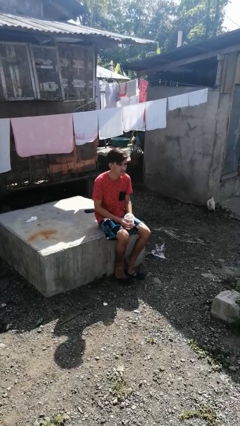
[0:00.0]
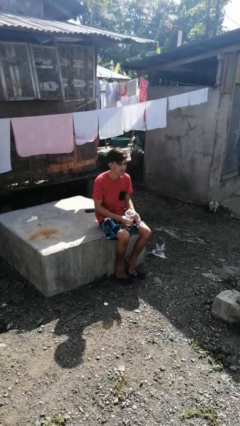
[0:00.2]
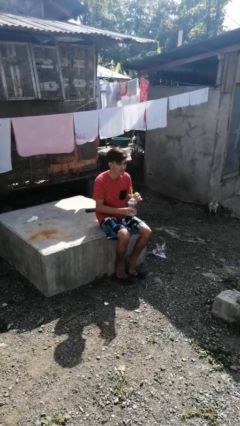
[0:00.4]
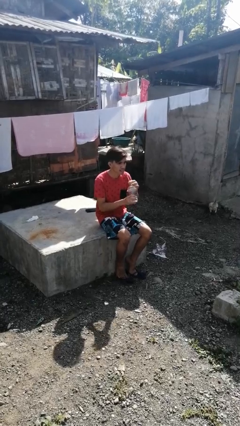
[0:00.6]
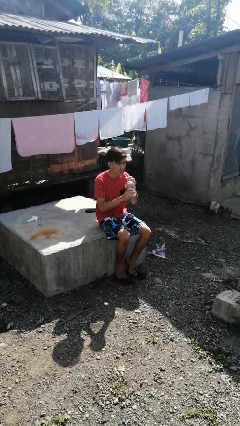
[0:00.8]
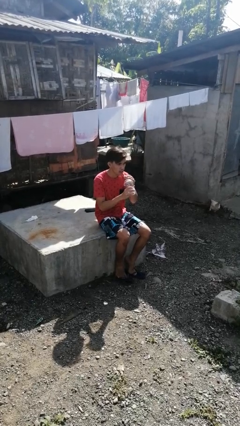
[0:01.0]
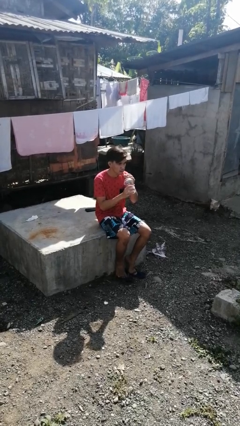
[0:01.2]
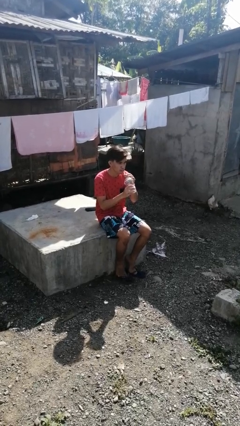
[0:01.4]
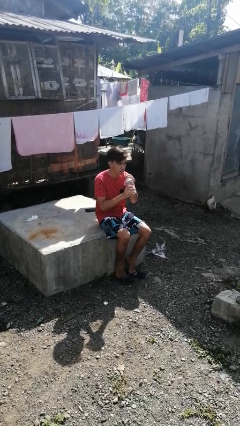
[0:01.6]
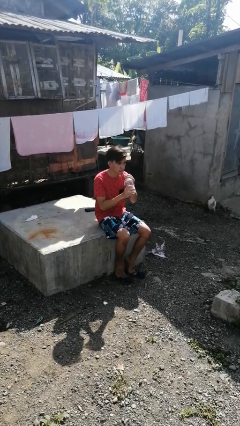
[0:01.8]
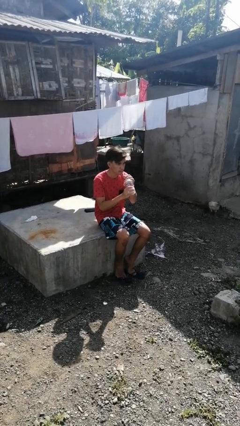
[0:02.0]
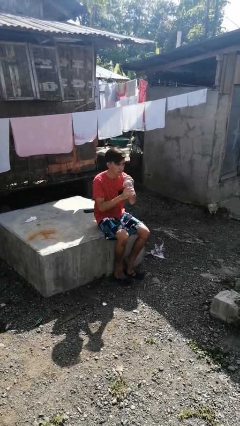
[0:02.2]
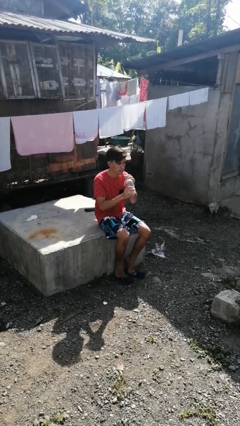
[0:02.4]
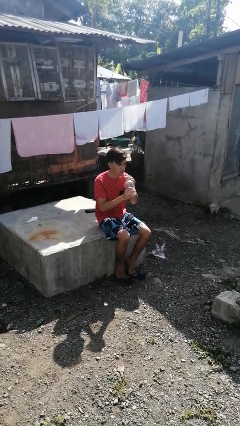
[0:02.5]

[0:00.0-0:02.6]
person drinks from straw

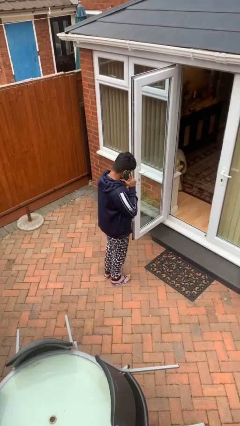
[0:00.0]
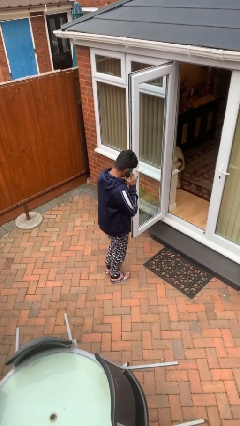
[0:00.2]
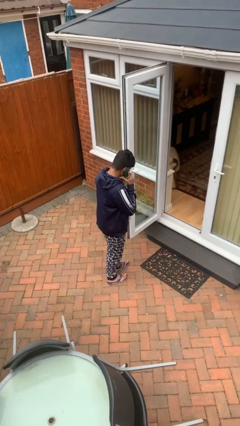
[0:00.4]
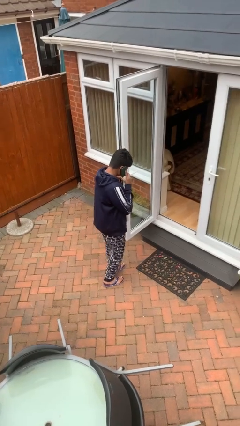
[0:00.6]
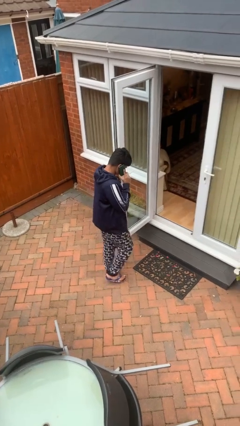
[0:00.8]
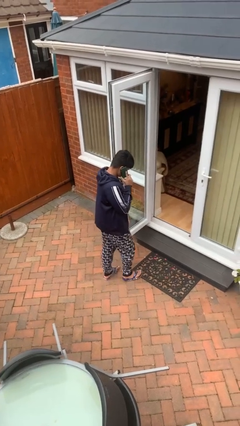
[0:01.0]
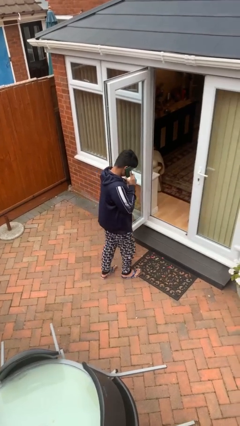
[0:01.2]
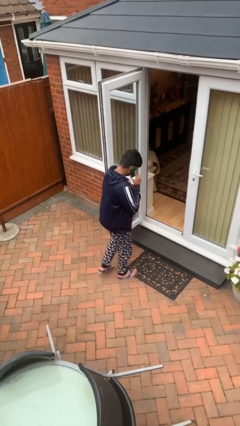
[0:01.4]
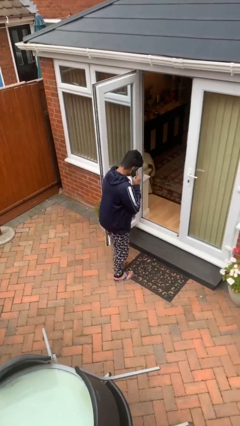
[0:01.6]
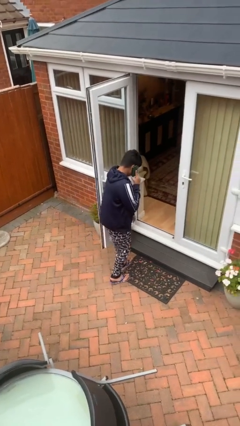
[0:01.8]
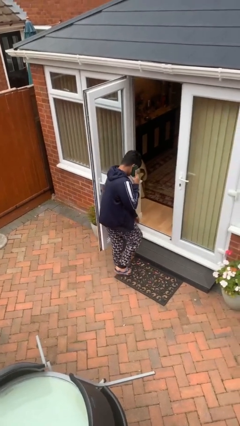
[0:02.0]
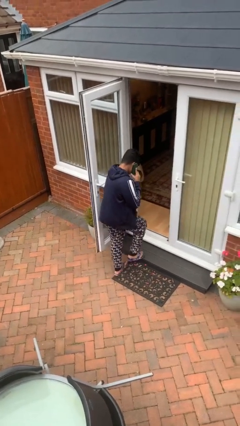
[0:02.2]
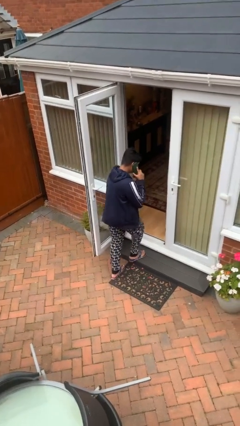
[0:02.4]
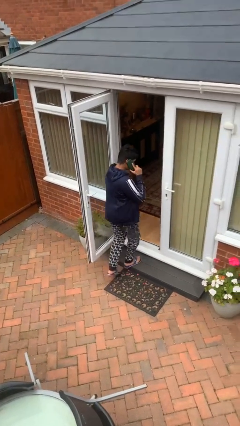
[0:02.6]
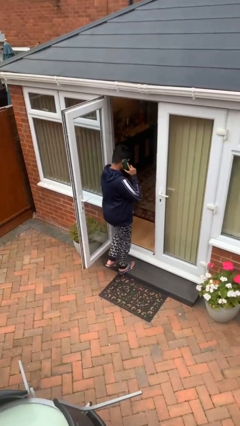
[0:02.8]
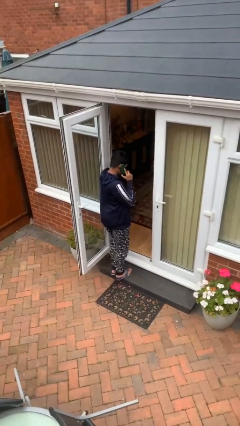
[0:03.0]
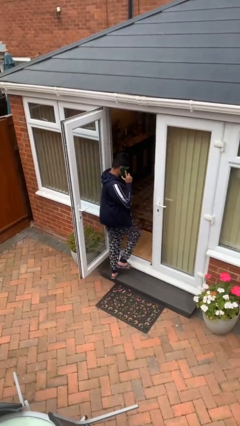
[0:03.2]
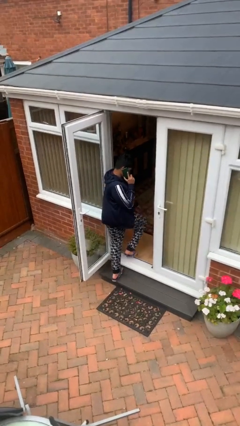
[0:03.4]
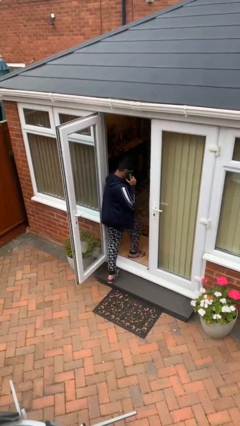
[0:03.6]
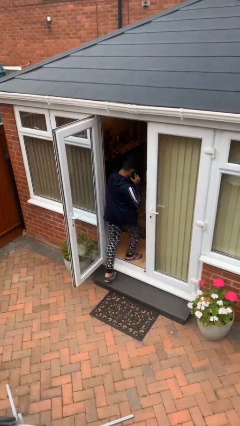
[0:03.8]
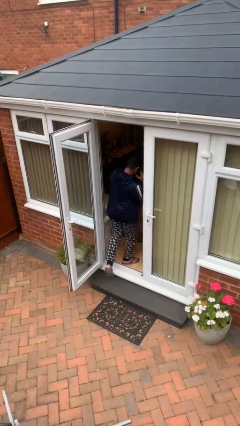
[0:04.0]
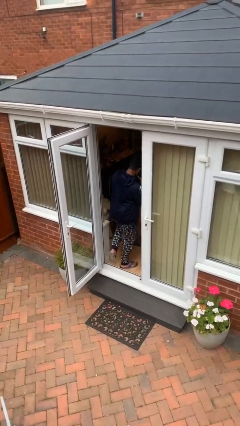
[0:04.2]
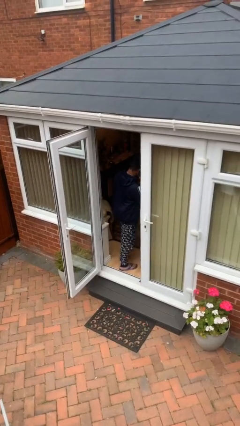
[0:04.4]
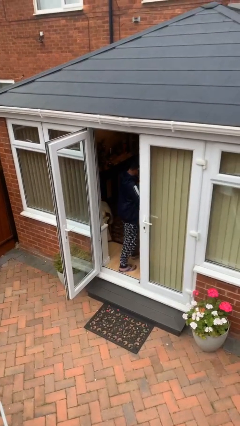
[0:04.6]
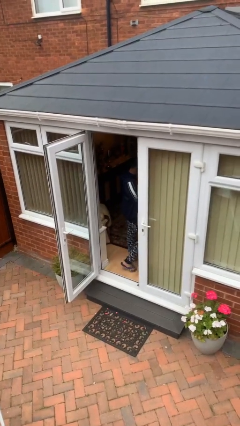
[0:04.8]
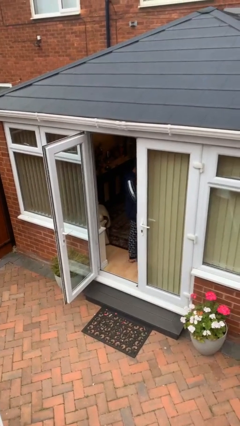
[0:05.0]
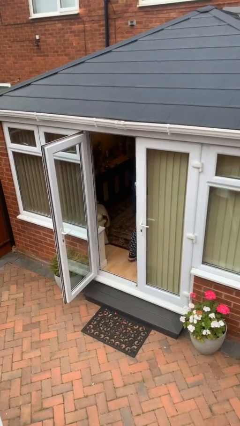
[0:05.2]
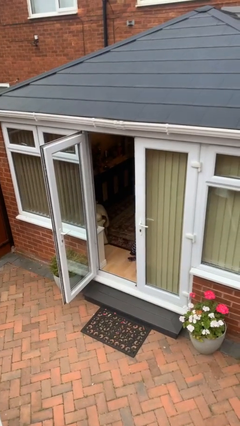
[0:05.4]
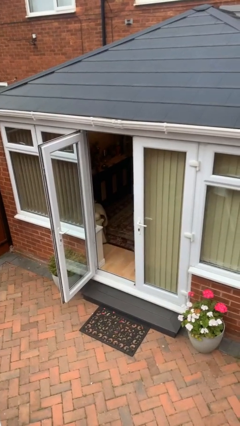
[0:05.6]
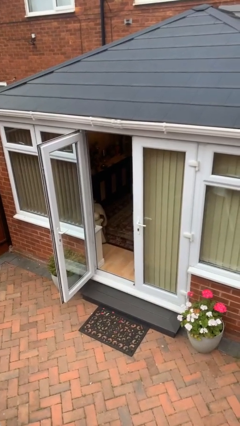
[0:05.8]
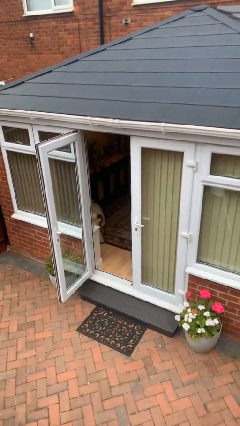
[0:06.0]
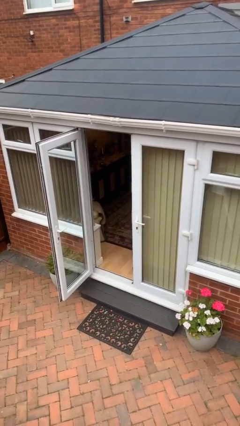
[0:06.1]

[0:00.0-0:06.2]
person exits scene through structure

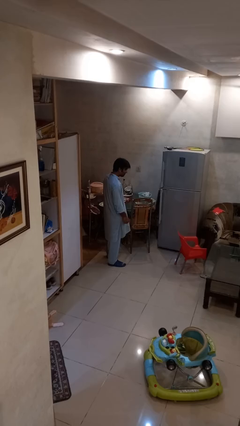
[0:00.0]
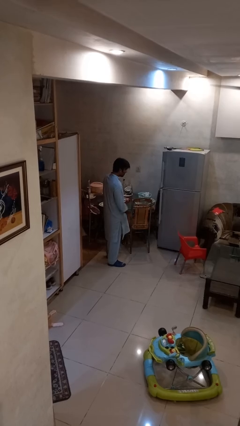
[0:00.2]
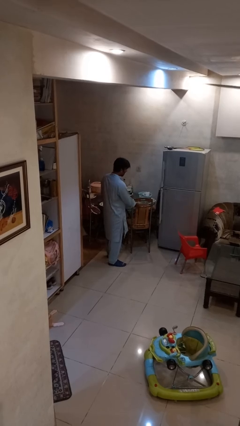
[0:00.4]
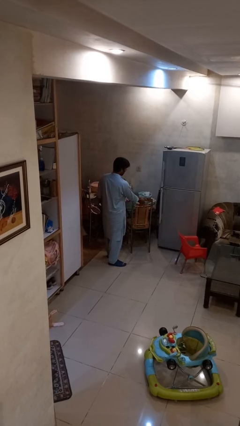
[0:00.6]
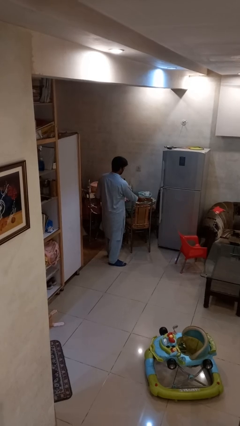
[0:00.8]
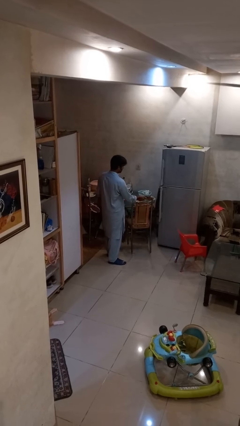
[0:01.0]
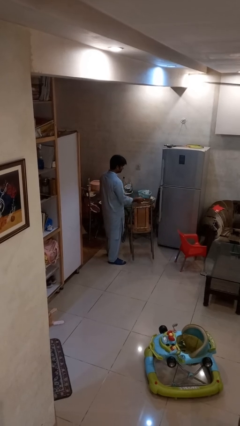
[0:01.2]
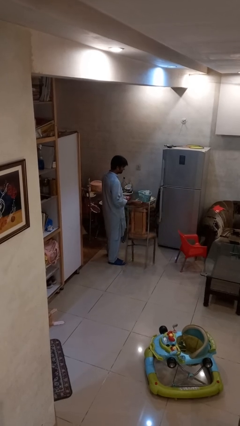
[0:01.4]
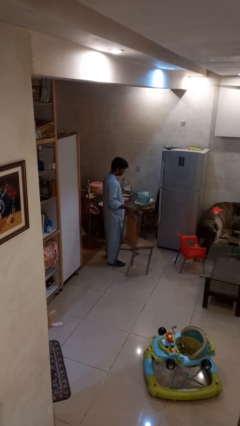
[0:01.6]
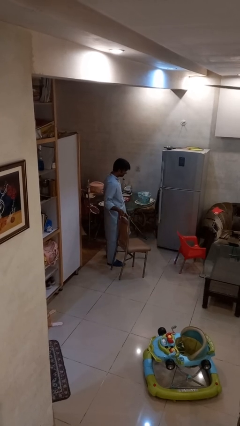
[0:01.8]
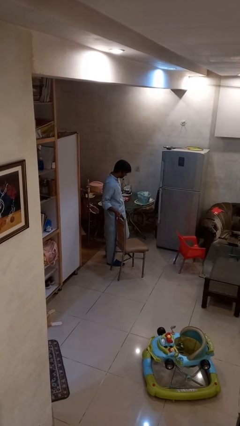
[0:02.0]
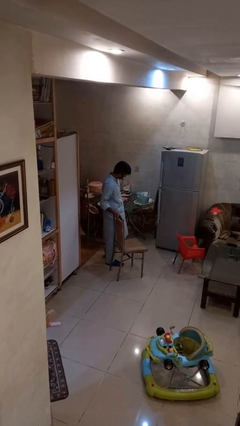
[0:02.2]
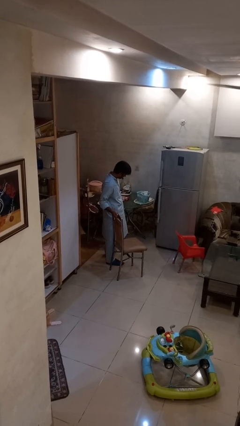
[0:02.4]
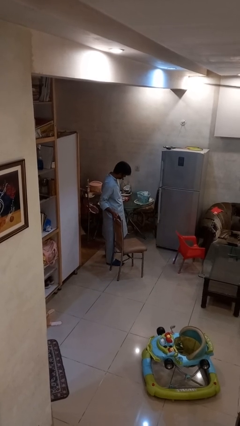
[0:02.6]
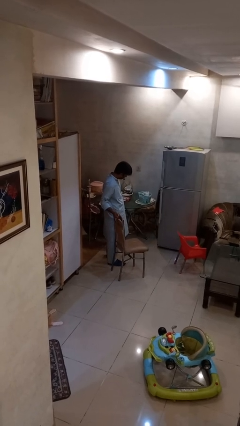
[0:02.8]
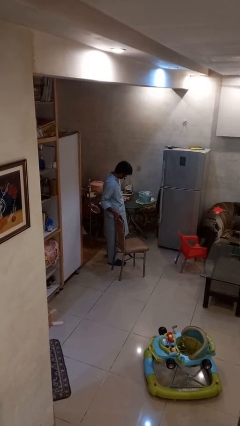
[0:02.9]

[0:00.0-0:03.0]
person pulls out chair

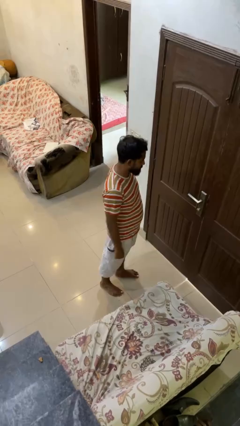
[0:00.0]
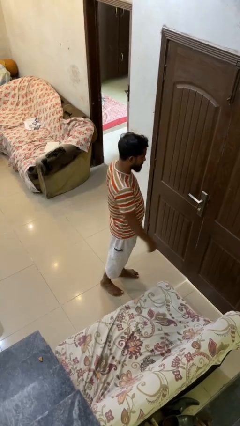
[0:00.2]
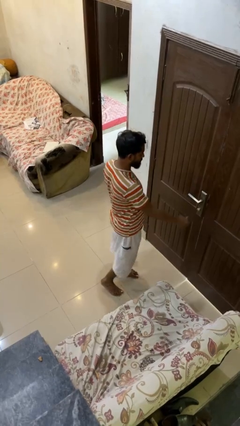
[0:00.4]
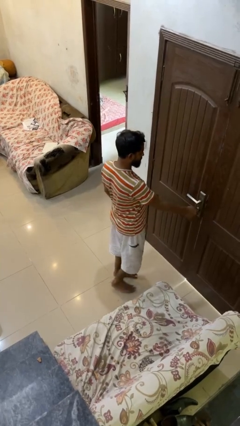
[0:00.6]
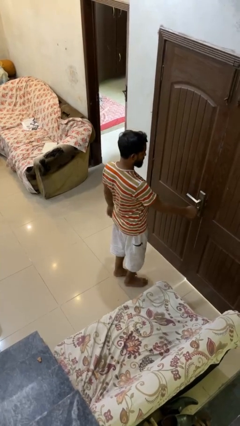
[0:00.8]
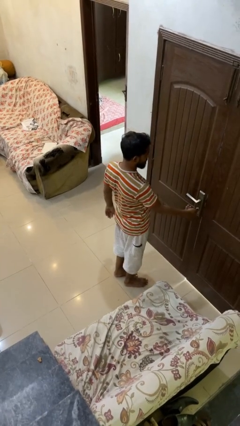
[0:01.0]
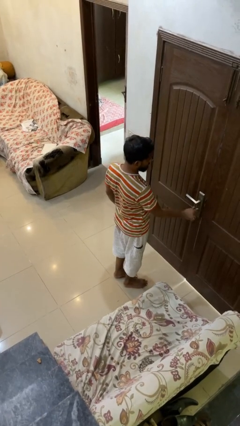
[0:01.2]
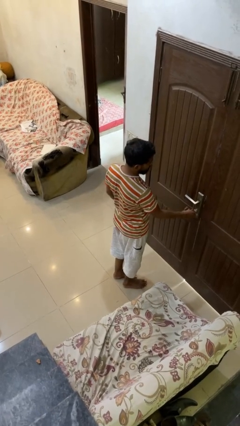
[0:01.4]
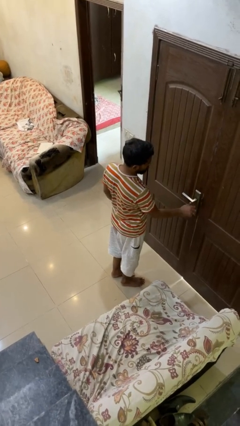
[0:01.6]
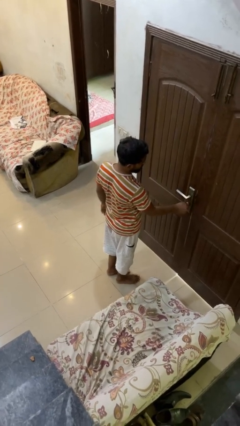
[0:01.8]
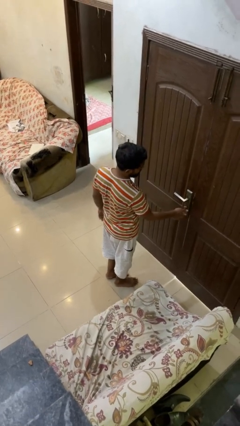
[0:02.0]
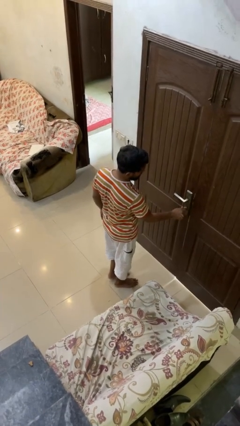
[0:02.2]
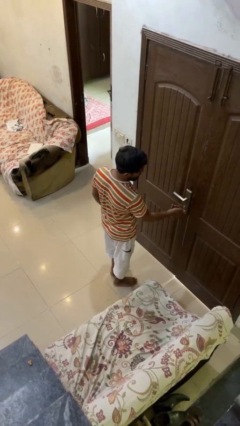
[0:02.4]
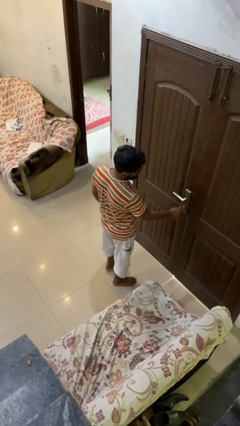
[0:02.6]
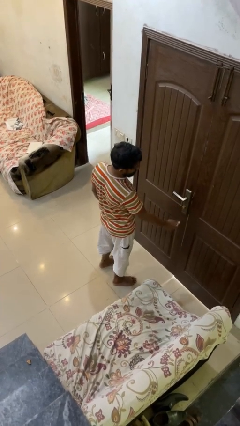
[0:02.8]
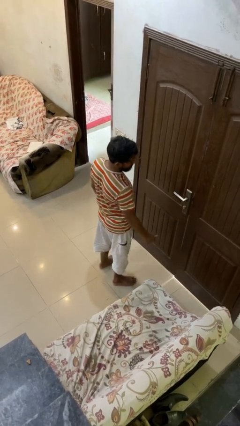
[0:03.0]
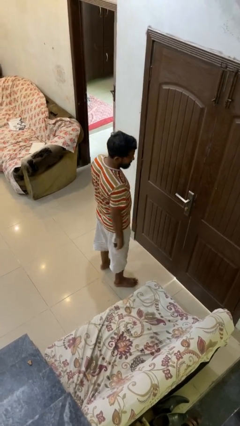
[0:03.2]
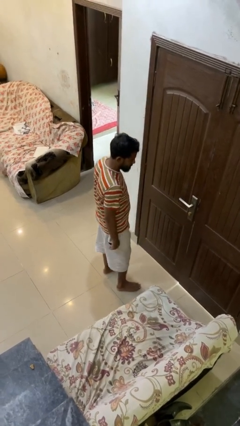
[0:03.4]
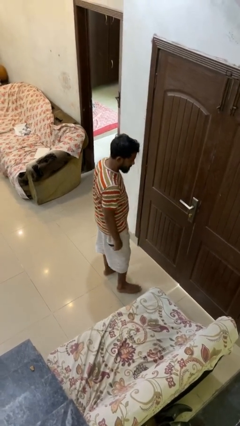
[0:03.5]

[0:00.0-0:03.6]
person locks door with keys

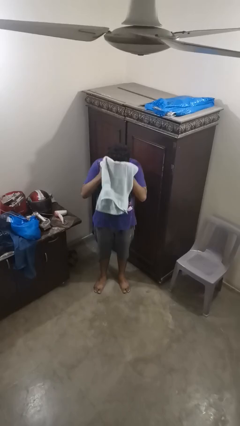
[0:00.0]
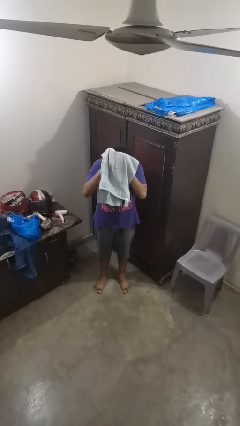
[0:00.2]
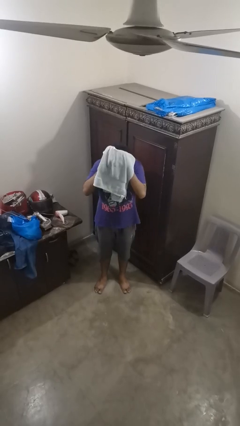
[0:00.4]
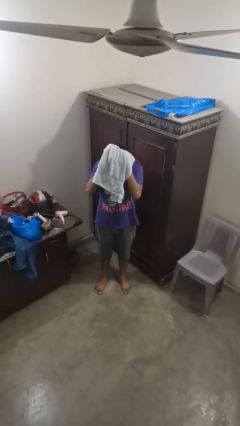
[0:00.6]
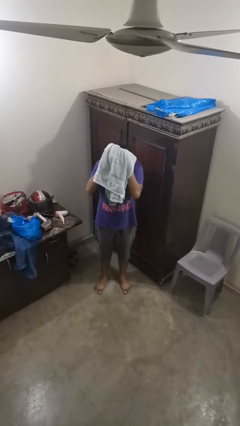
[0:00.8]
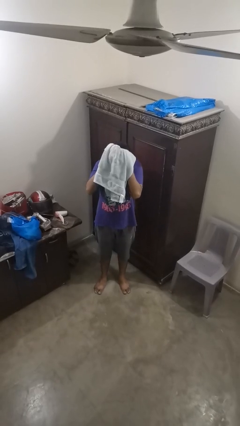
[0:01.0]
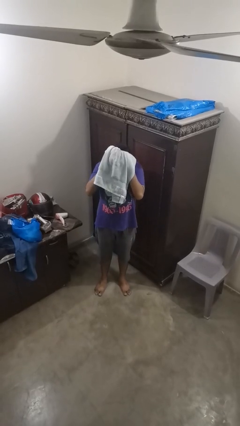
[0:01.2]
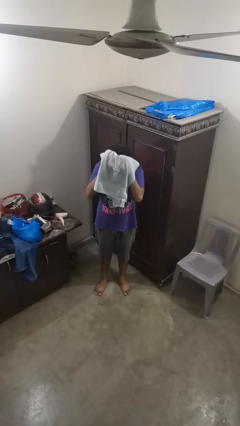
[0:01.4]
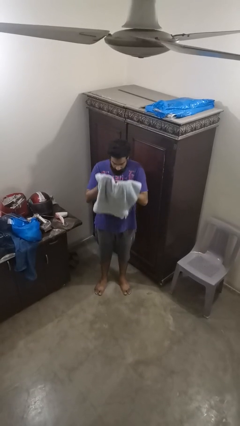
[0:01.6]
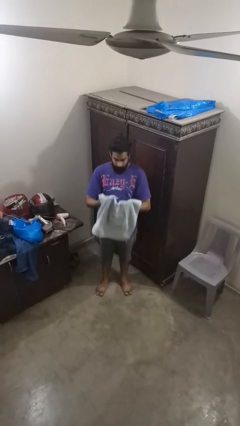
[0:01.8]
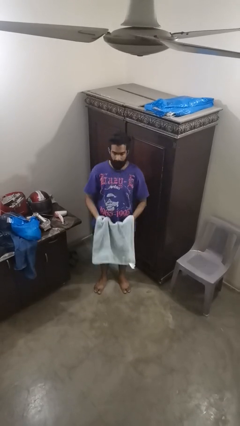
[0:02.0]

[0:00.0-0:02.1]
person dries hair with towel

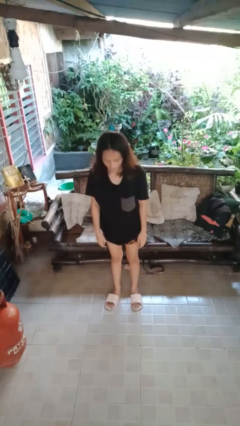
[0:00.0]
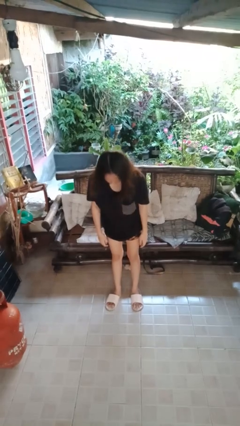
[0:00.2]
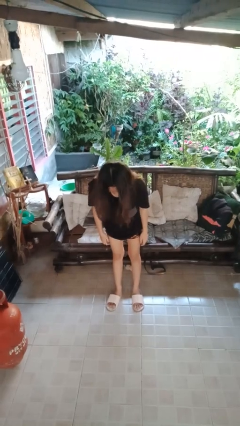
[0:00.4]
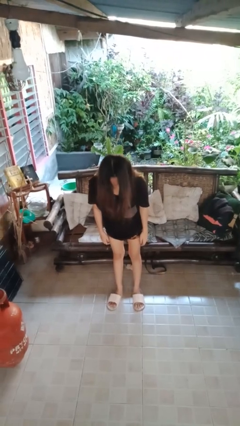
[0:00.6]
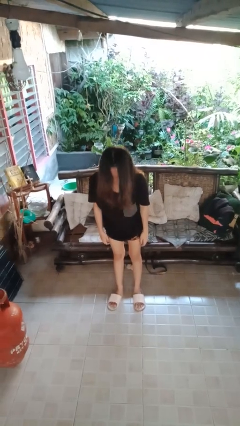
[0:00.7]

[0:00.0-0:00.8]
person bows
